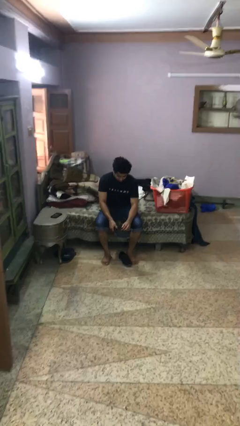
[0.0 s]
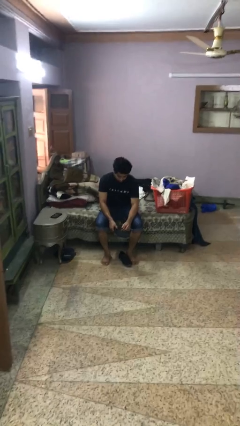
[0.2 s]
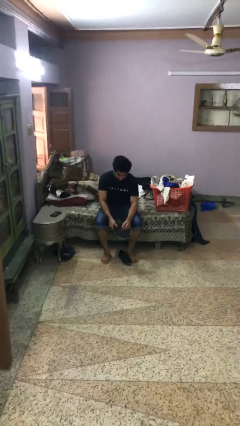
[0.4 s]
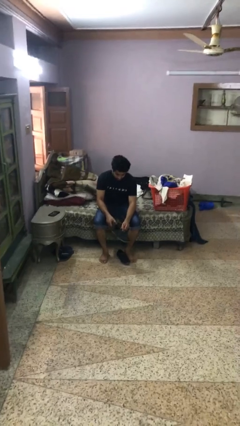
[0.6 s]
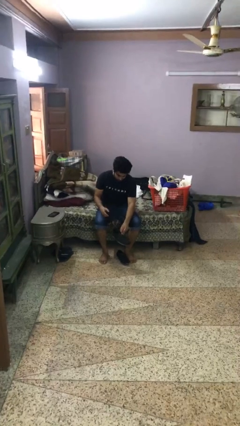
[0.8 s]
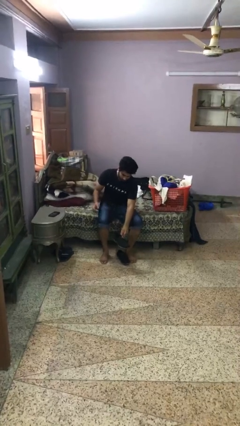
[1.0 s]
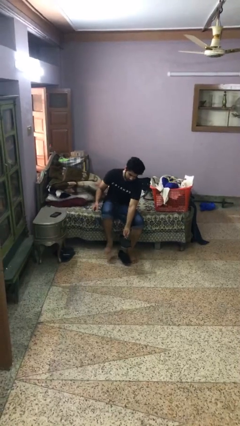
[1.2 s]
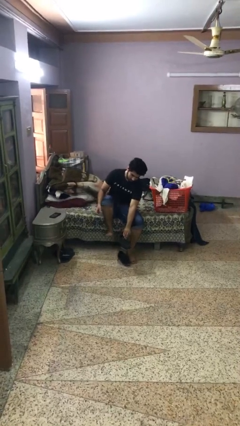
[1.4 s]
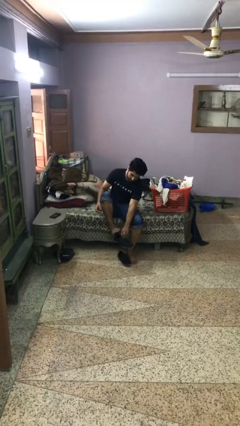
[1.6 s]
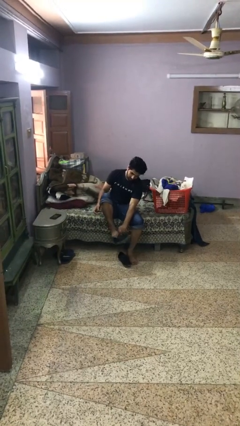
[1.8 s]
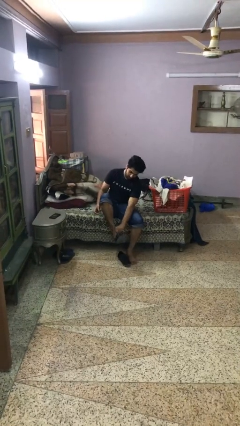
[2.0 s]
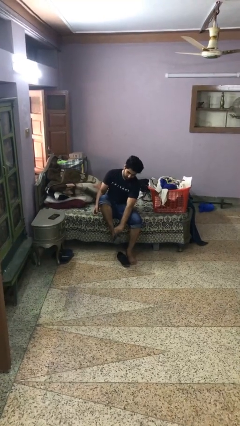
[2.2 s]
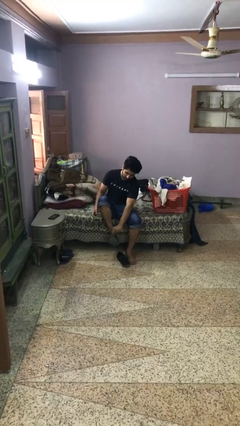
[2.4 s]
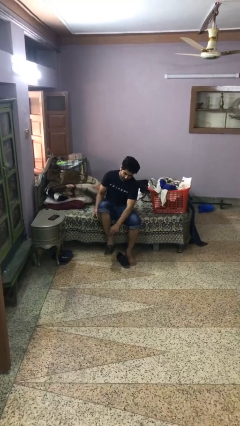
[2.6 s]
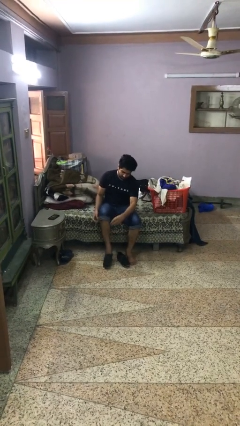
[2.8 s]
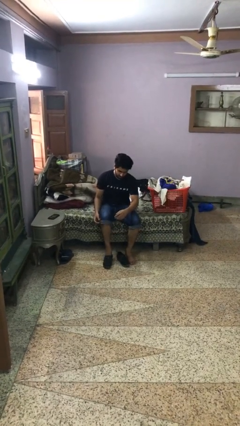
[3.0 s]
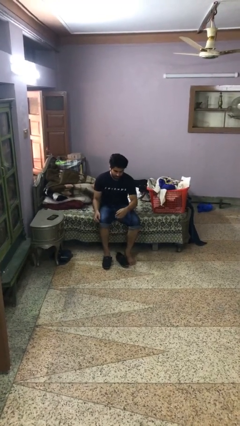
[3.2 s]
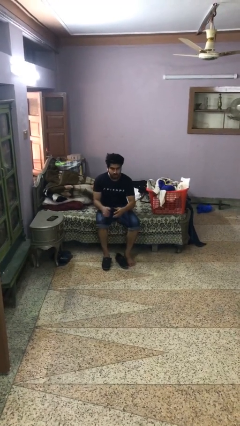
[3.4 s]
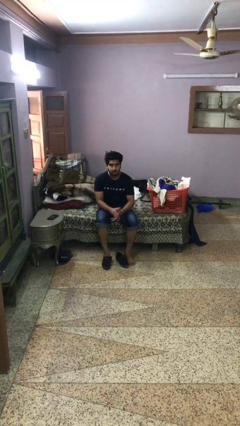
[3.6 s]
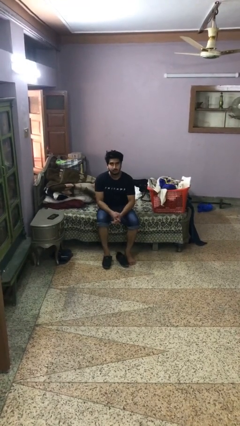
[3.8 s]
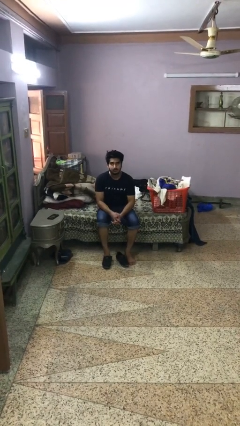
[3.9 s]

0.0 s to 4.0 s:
person puts on boots

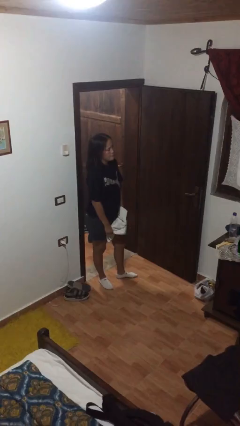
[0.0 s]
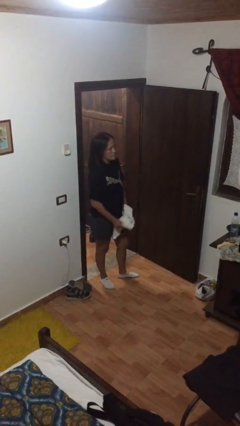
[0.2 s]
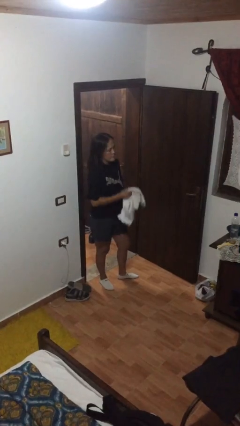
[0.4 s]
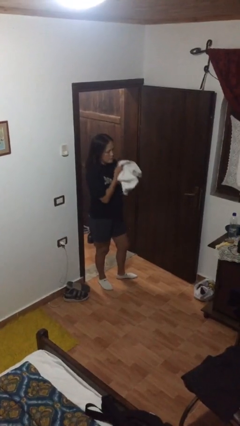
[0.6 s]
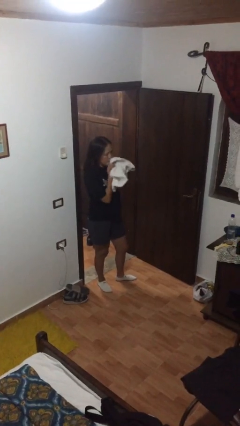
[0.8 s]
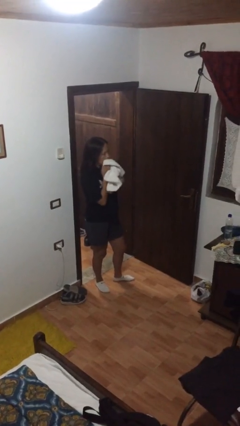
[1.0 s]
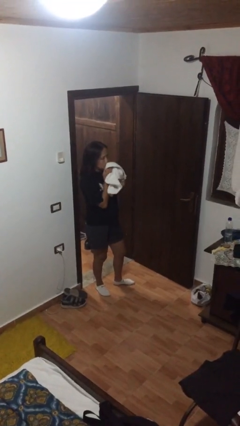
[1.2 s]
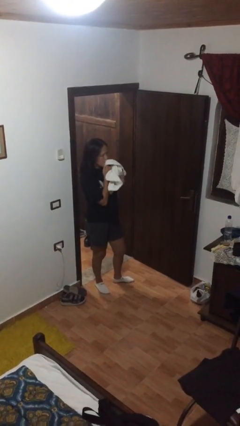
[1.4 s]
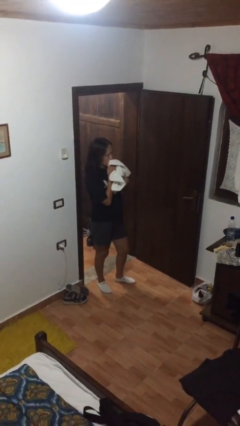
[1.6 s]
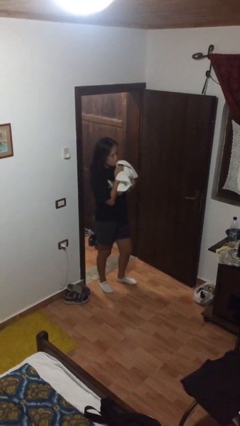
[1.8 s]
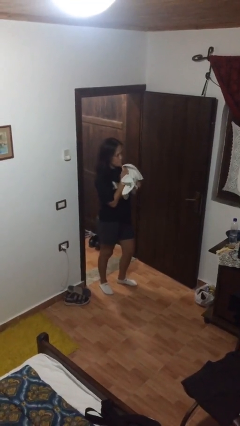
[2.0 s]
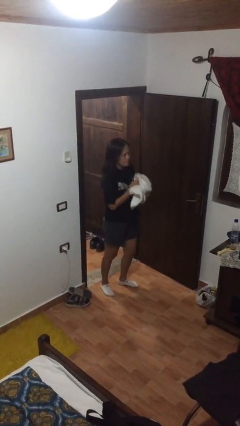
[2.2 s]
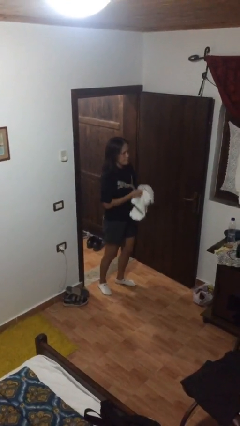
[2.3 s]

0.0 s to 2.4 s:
person wipes mouth with napkin

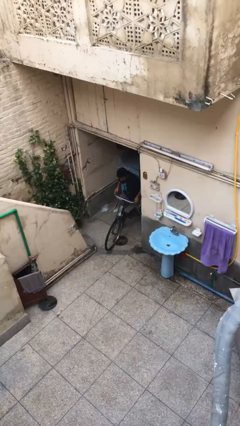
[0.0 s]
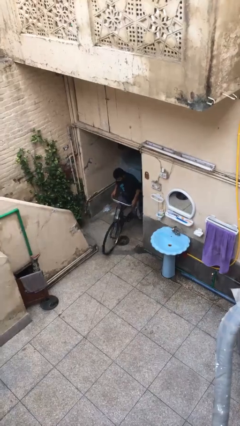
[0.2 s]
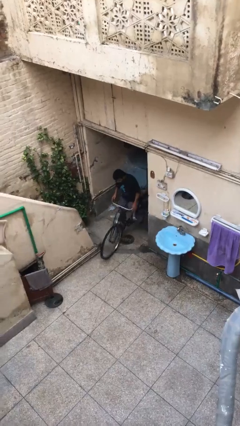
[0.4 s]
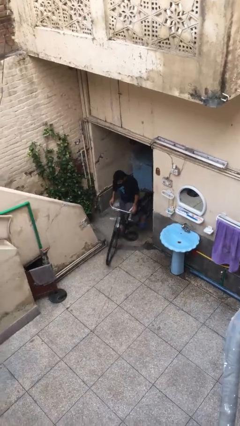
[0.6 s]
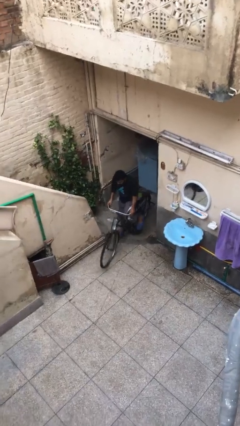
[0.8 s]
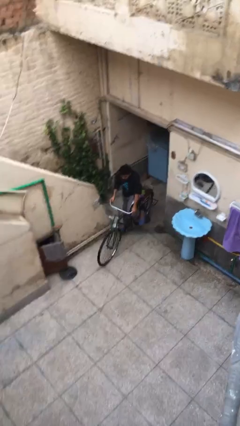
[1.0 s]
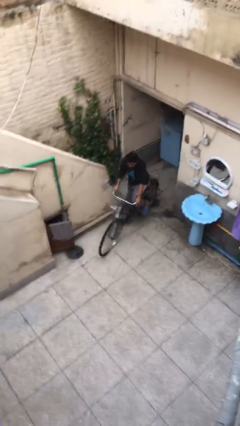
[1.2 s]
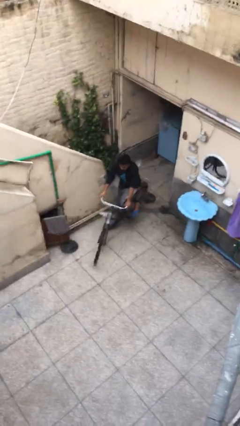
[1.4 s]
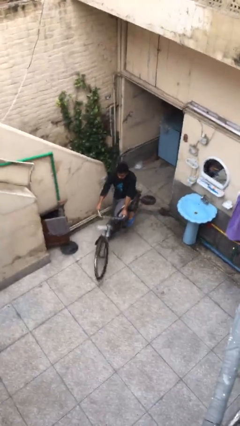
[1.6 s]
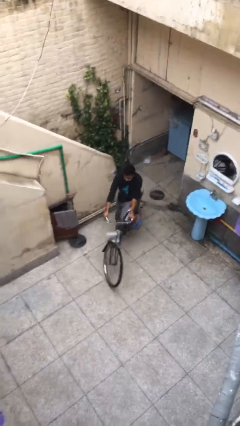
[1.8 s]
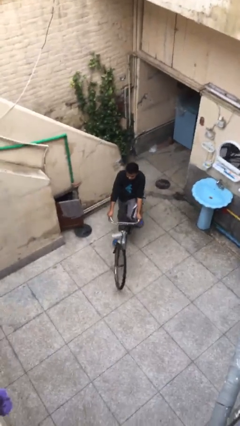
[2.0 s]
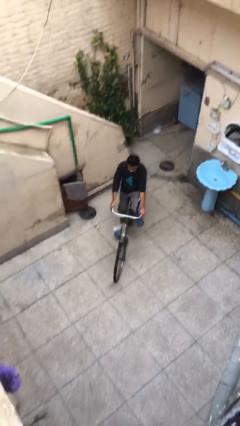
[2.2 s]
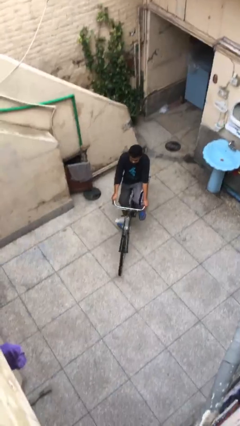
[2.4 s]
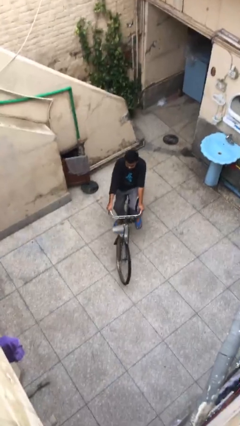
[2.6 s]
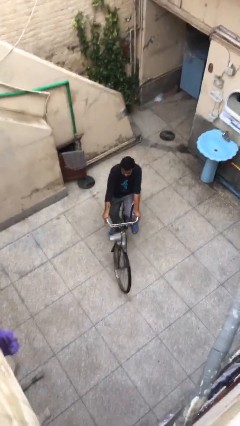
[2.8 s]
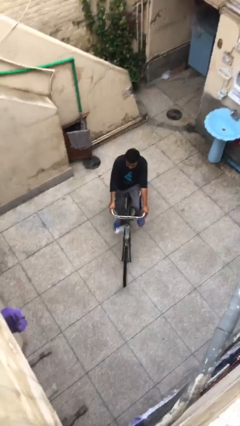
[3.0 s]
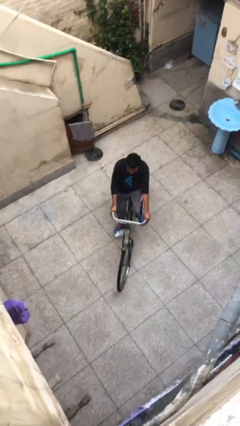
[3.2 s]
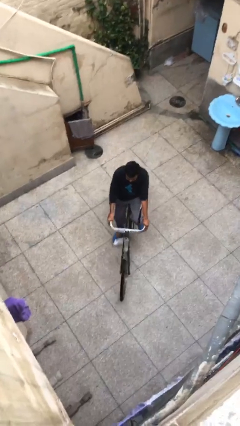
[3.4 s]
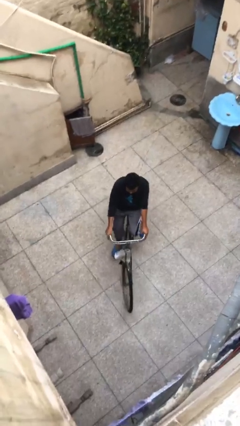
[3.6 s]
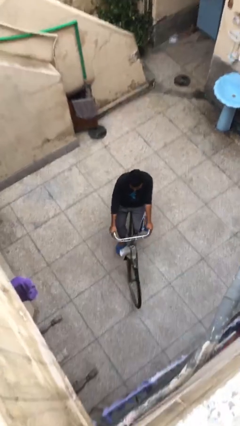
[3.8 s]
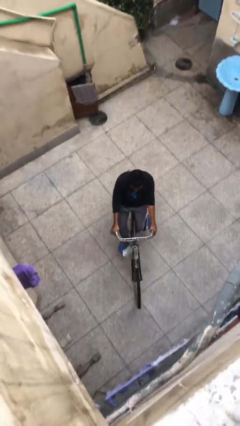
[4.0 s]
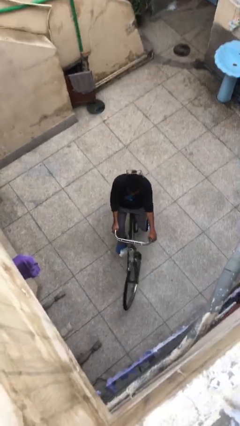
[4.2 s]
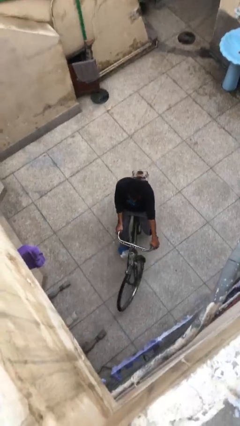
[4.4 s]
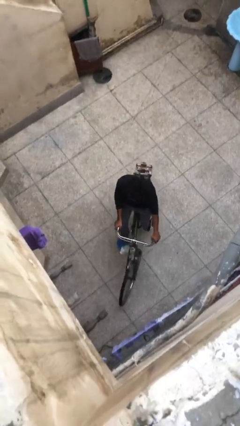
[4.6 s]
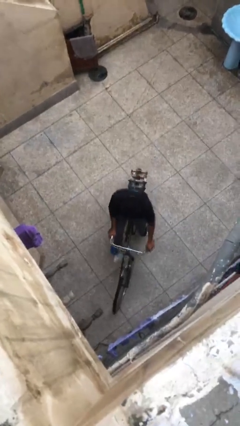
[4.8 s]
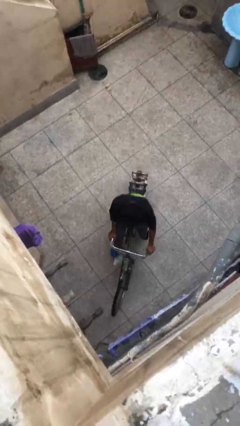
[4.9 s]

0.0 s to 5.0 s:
person rides bicycle

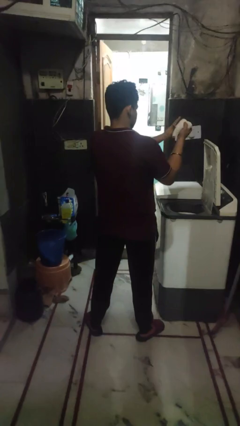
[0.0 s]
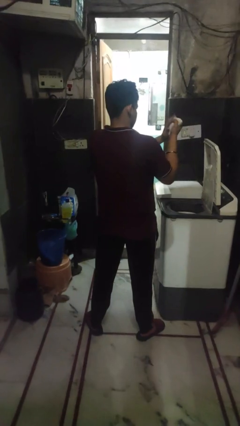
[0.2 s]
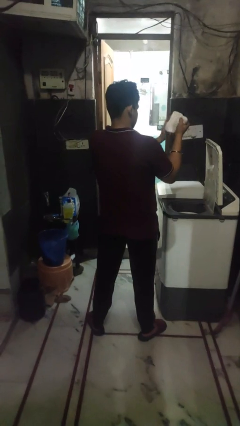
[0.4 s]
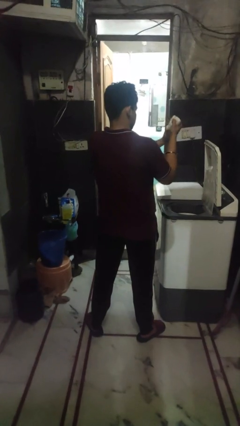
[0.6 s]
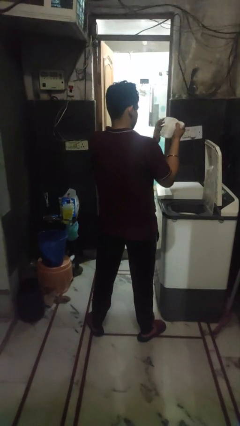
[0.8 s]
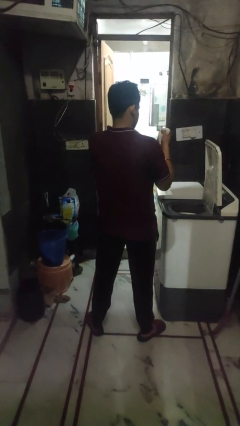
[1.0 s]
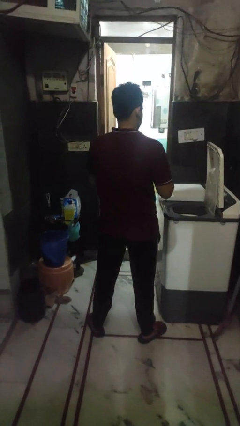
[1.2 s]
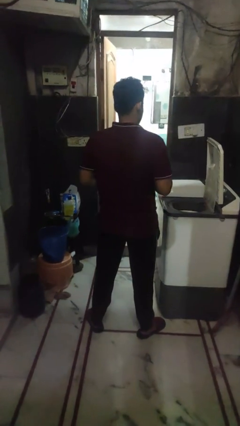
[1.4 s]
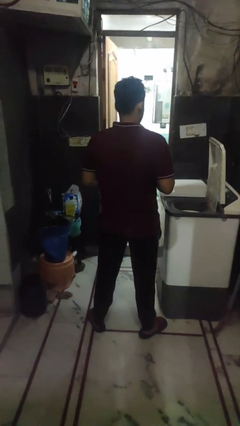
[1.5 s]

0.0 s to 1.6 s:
person cleans dryer lint trap

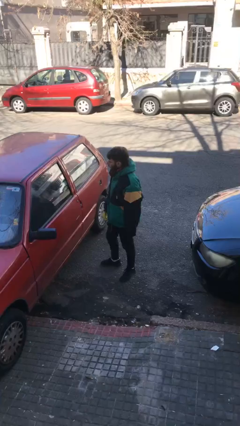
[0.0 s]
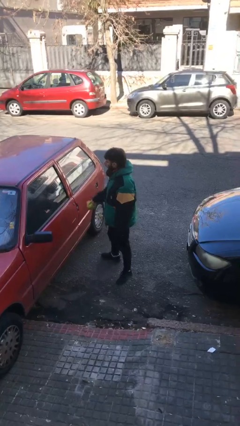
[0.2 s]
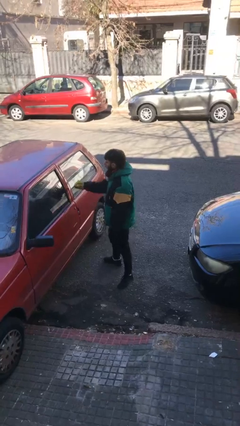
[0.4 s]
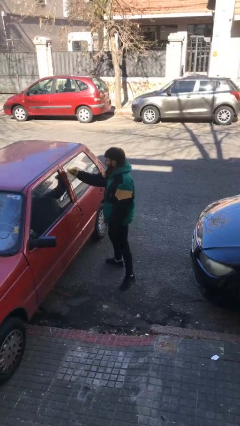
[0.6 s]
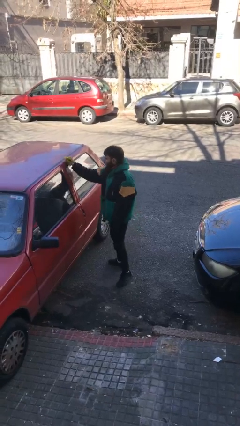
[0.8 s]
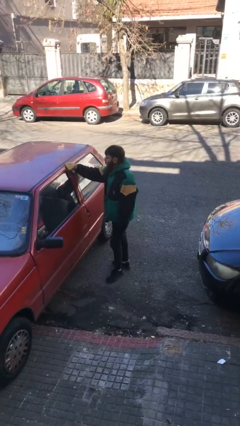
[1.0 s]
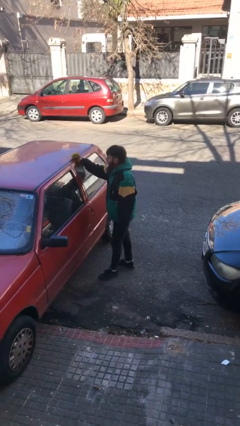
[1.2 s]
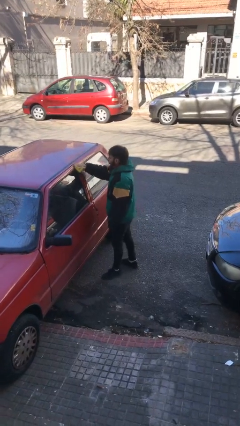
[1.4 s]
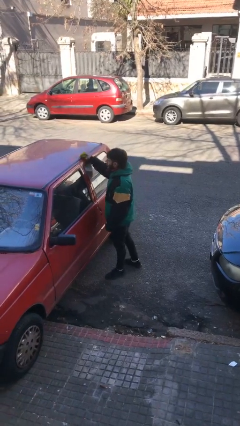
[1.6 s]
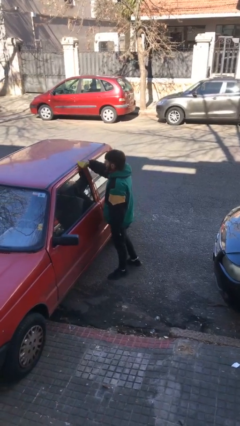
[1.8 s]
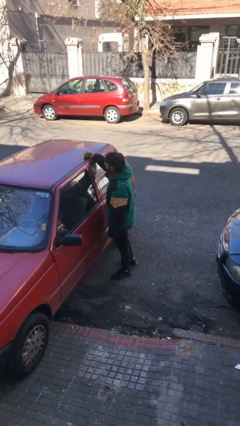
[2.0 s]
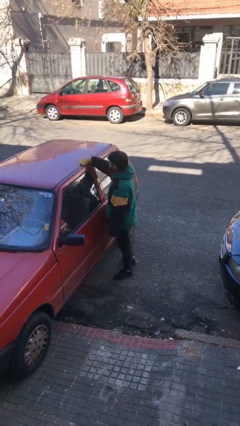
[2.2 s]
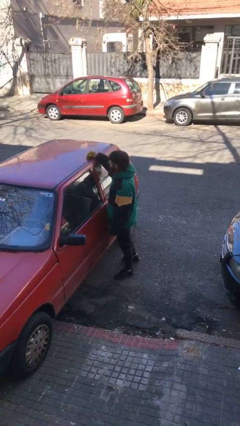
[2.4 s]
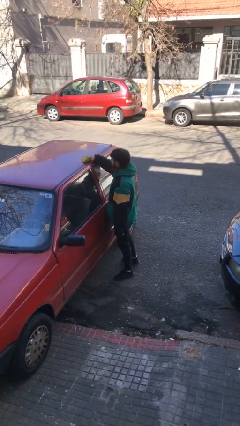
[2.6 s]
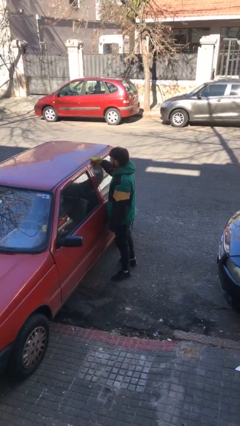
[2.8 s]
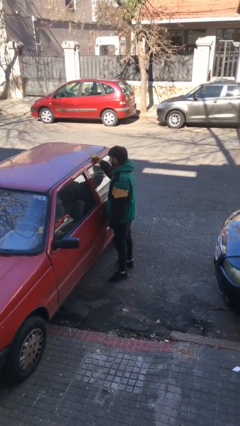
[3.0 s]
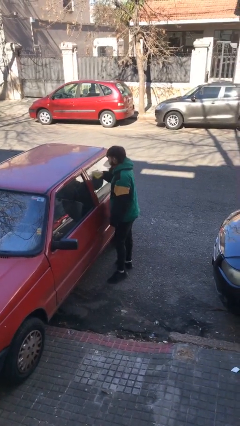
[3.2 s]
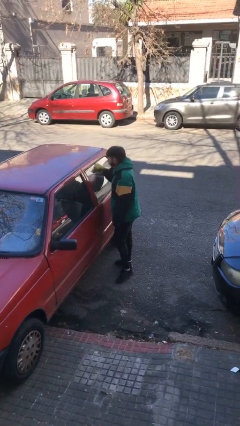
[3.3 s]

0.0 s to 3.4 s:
person polishes car with rag

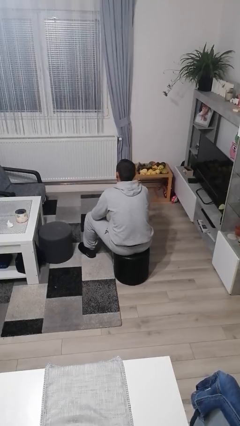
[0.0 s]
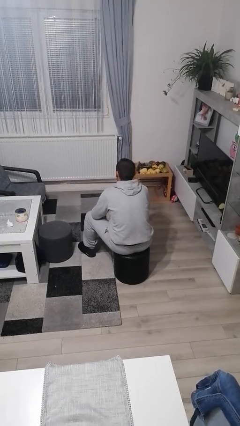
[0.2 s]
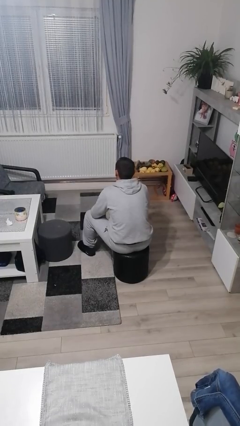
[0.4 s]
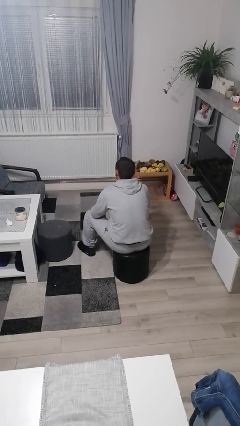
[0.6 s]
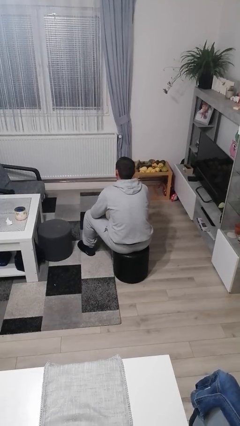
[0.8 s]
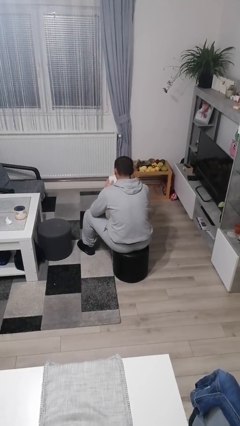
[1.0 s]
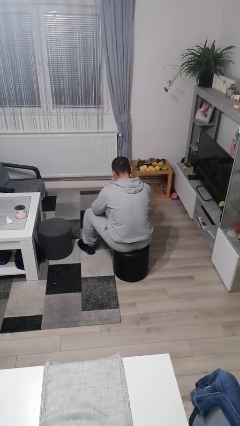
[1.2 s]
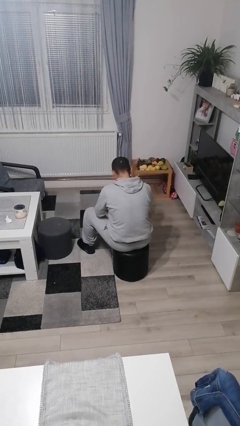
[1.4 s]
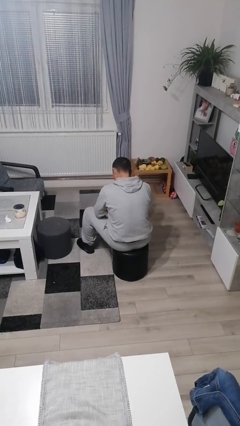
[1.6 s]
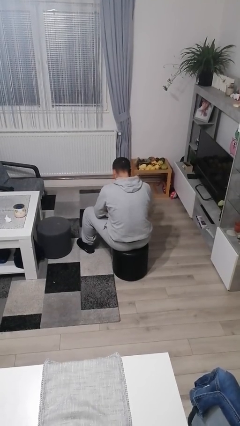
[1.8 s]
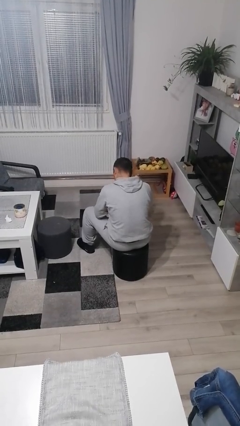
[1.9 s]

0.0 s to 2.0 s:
person gestures behind me
